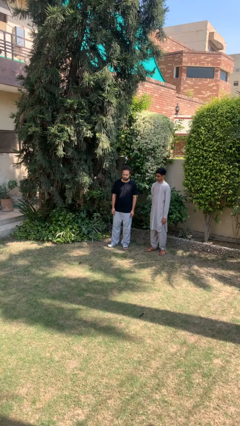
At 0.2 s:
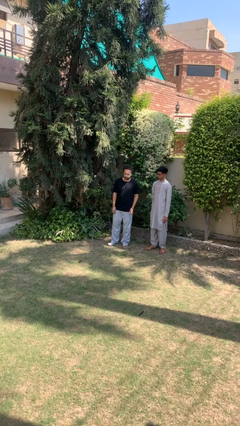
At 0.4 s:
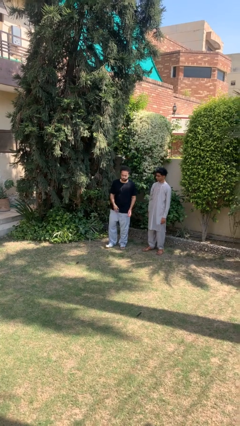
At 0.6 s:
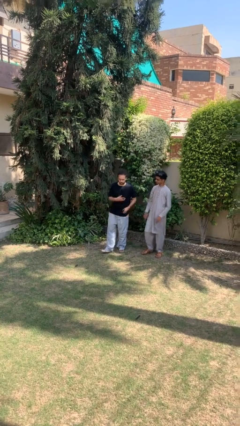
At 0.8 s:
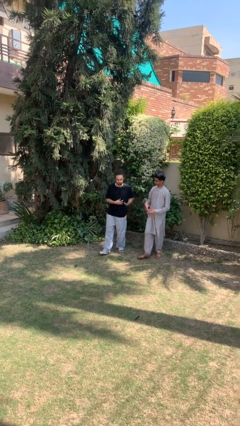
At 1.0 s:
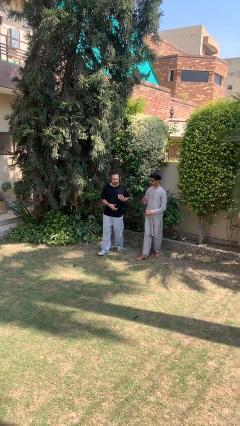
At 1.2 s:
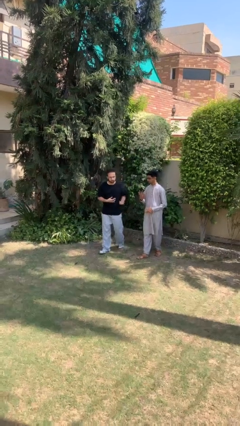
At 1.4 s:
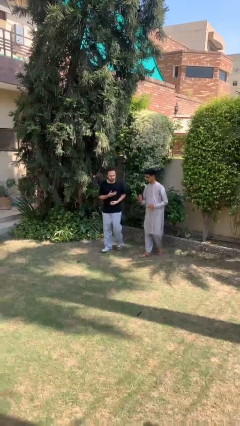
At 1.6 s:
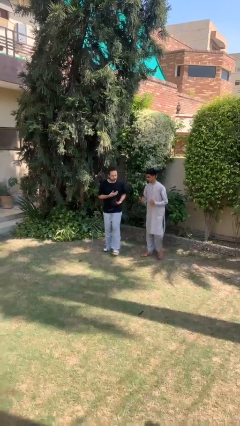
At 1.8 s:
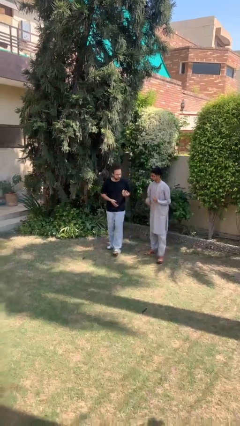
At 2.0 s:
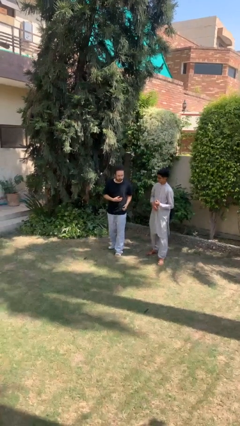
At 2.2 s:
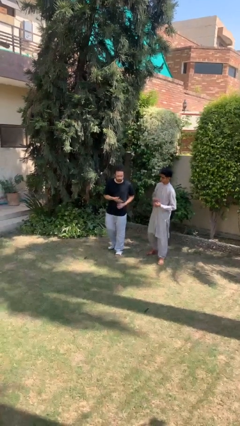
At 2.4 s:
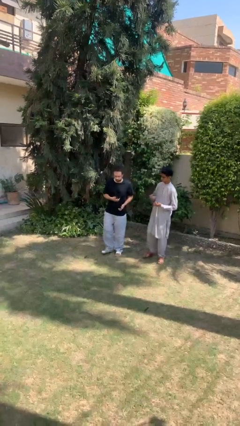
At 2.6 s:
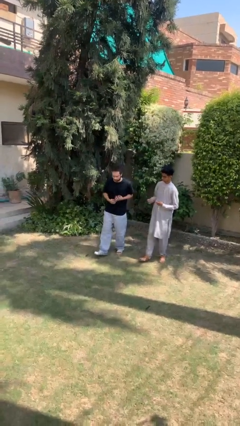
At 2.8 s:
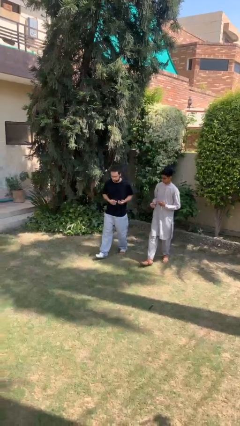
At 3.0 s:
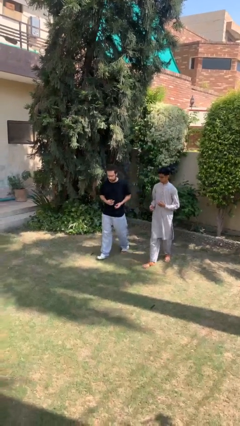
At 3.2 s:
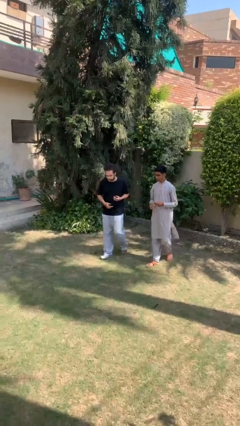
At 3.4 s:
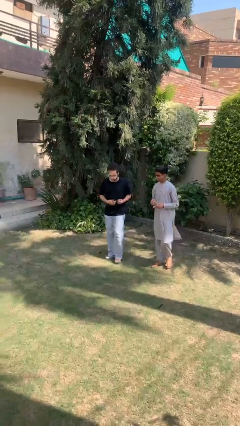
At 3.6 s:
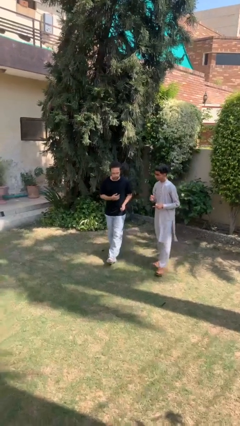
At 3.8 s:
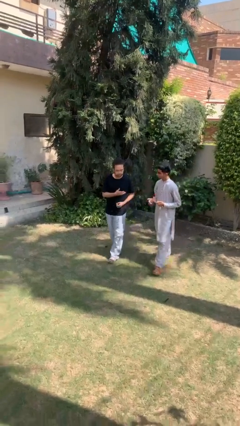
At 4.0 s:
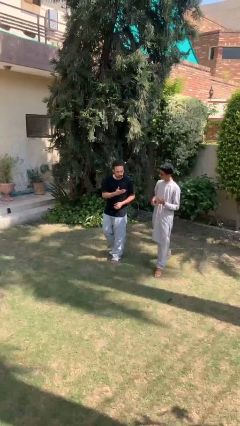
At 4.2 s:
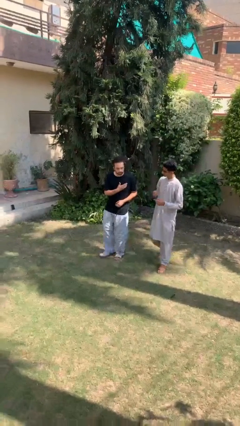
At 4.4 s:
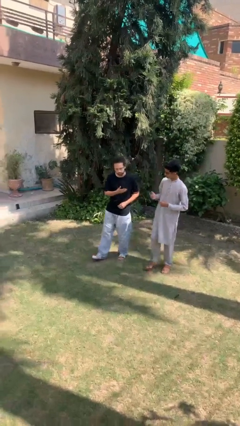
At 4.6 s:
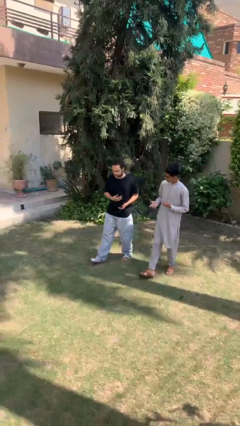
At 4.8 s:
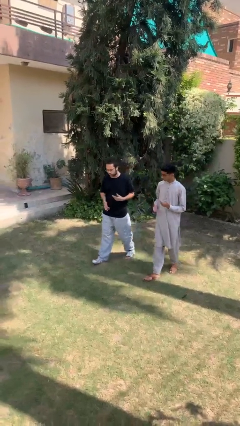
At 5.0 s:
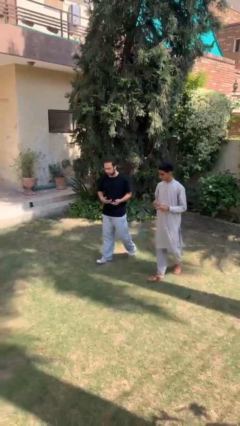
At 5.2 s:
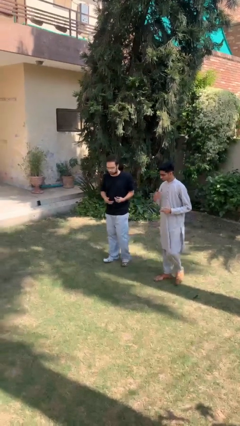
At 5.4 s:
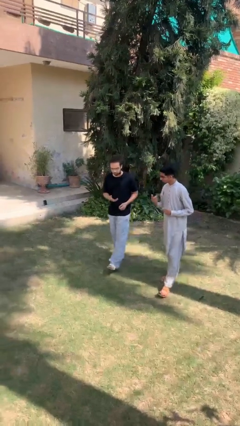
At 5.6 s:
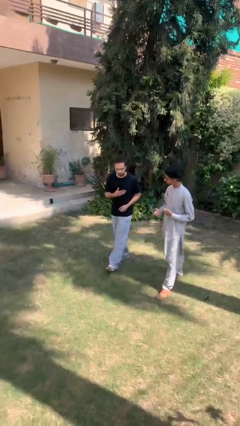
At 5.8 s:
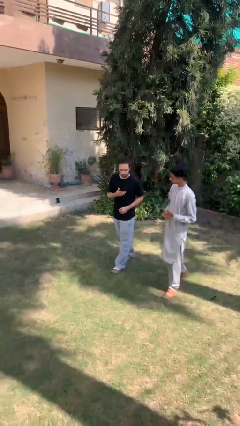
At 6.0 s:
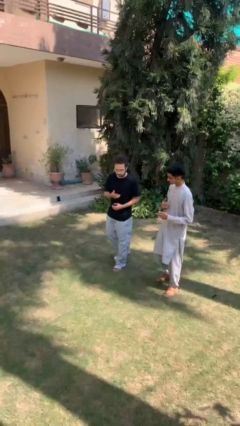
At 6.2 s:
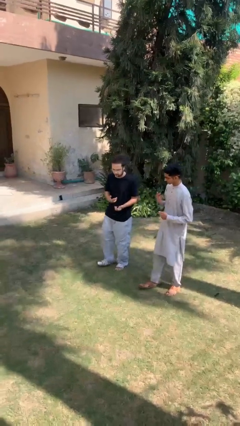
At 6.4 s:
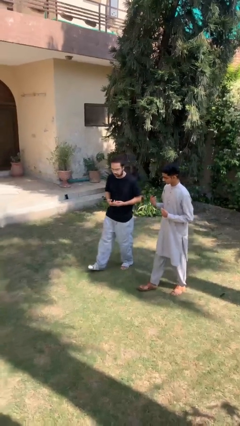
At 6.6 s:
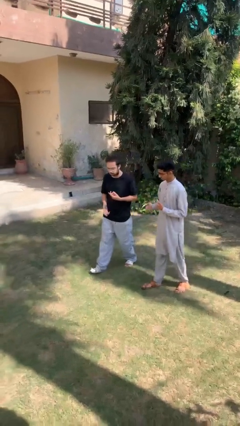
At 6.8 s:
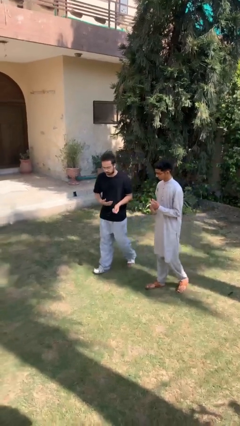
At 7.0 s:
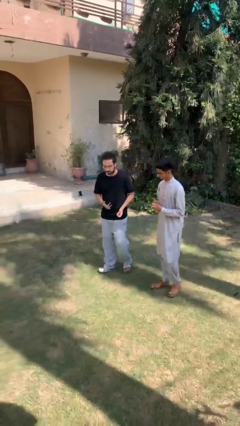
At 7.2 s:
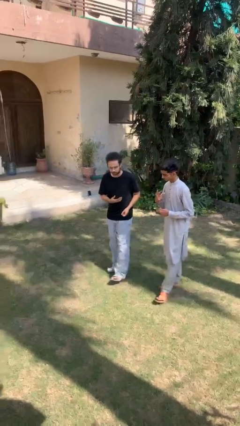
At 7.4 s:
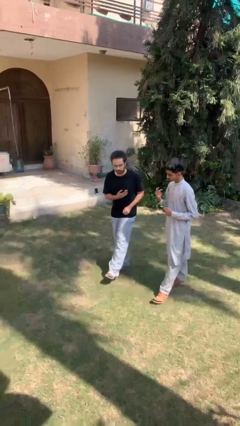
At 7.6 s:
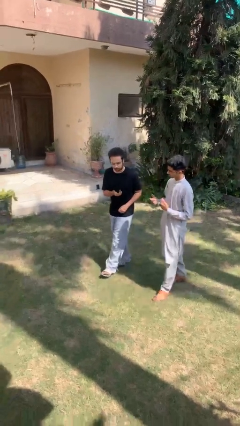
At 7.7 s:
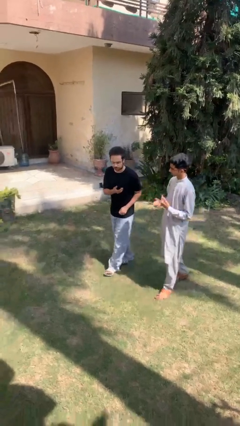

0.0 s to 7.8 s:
person talks to person

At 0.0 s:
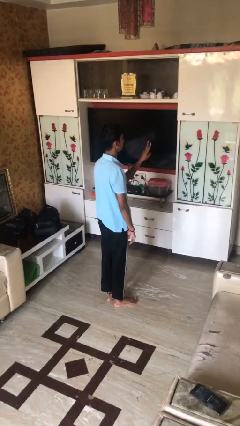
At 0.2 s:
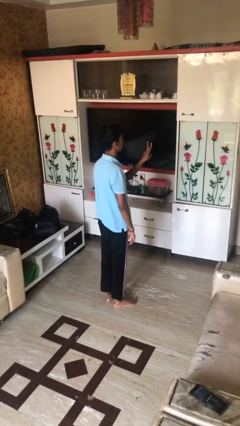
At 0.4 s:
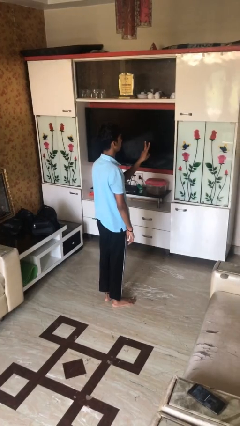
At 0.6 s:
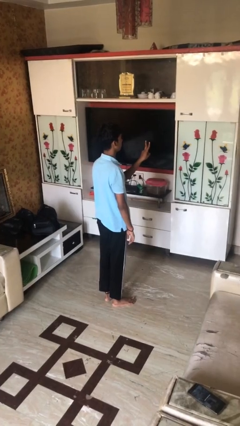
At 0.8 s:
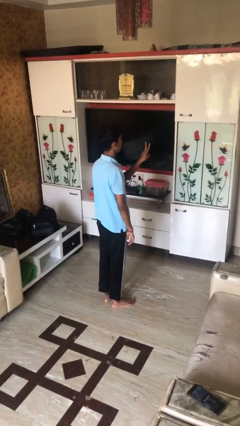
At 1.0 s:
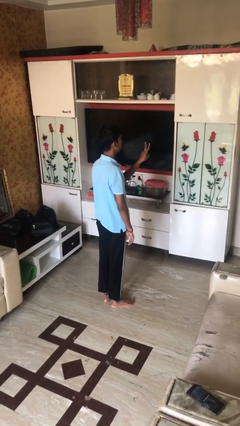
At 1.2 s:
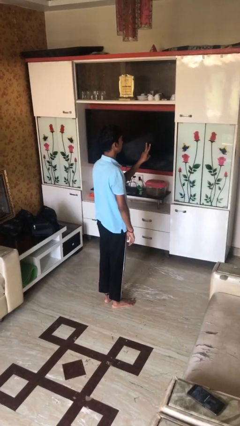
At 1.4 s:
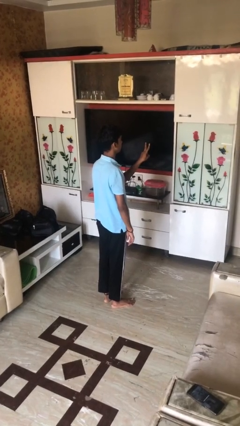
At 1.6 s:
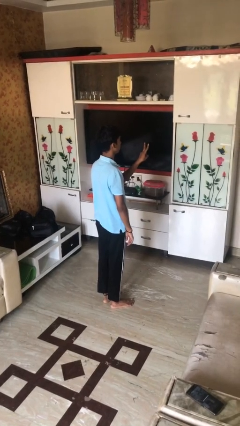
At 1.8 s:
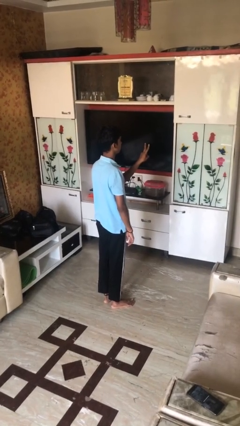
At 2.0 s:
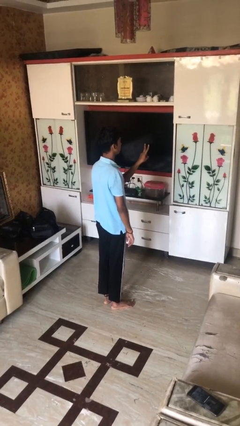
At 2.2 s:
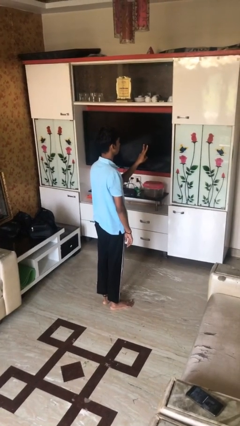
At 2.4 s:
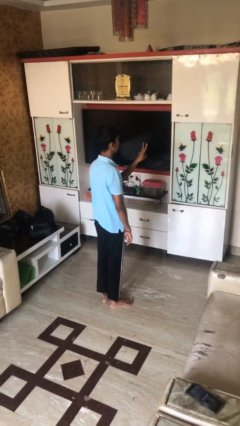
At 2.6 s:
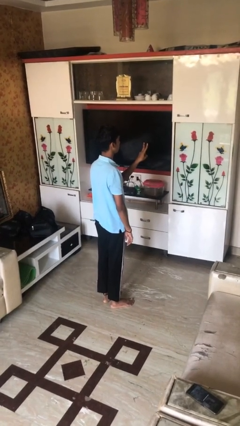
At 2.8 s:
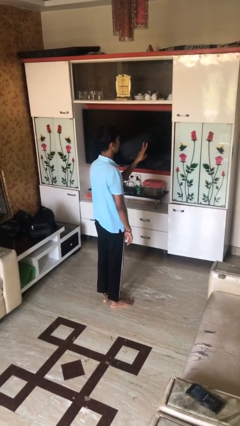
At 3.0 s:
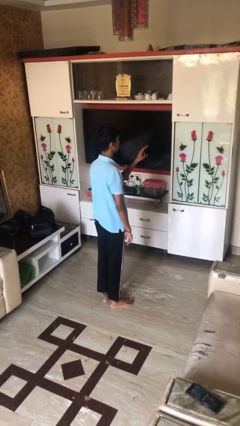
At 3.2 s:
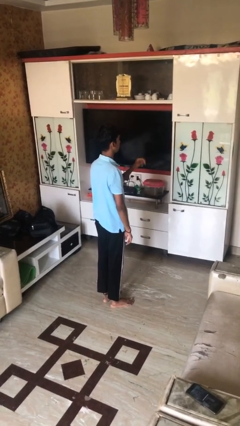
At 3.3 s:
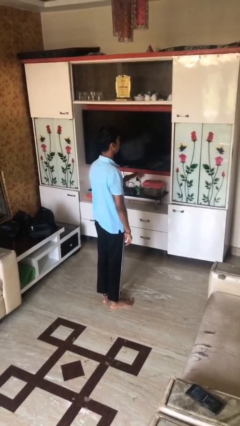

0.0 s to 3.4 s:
person gestures peace

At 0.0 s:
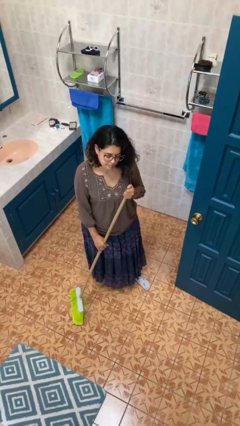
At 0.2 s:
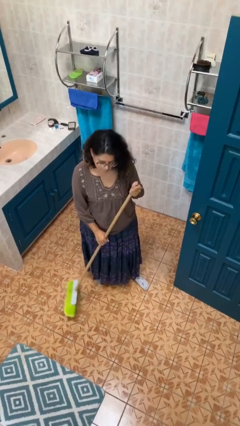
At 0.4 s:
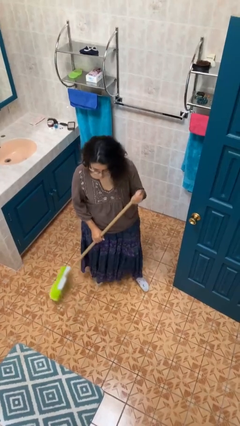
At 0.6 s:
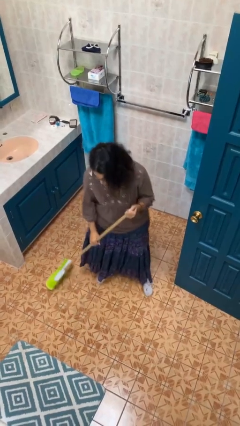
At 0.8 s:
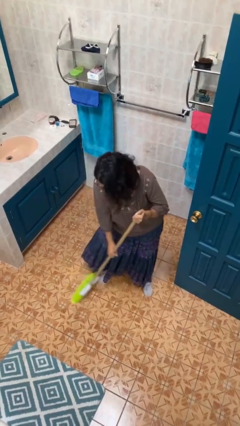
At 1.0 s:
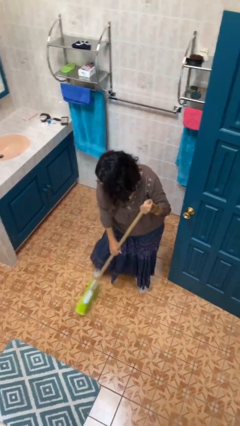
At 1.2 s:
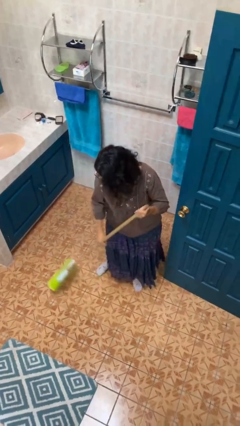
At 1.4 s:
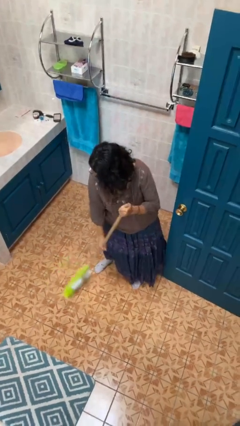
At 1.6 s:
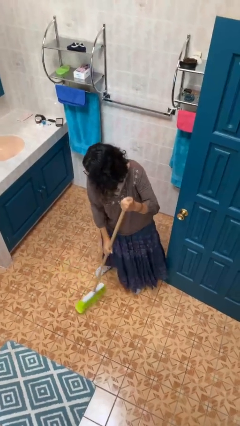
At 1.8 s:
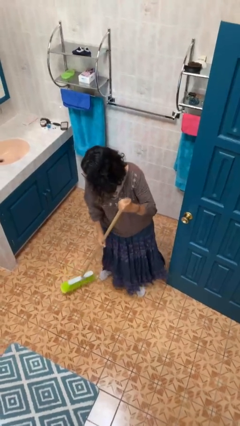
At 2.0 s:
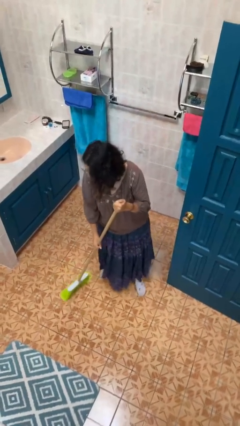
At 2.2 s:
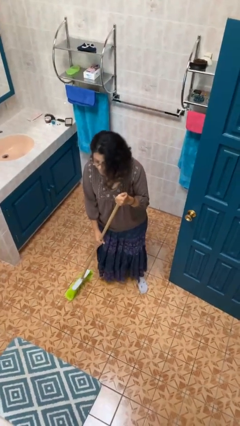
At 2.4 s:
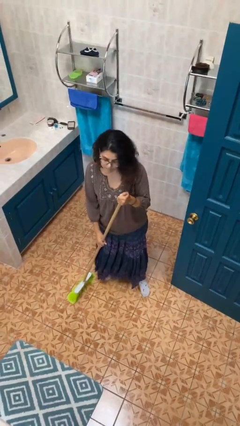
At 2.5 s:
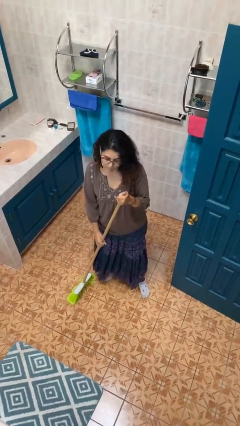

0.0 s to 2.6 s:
person sweeps floor

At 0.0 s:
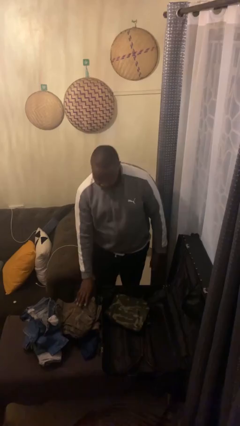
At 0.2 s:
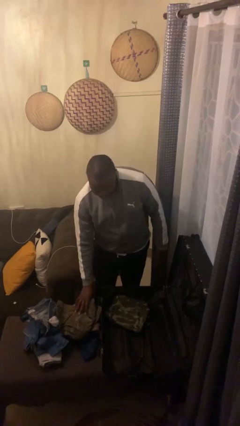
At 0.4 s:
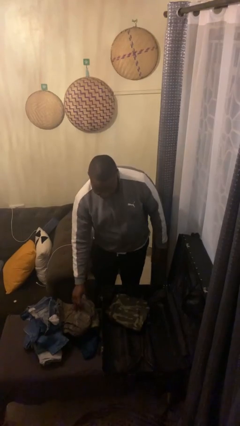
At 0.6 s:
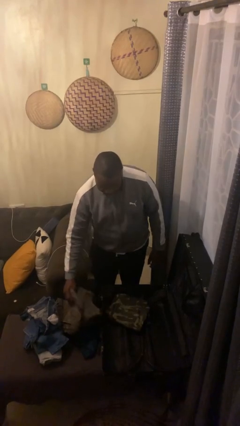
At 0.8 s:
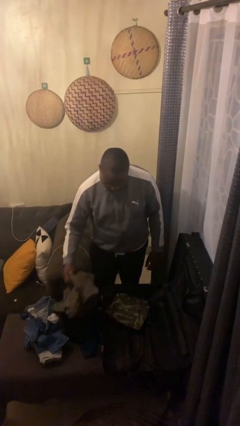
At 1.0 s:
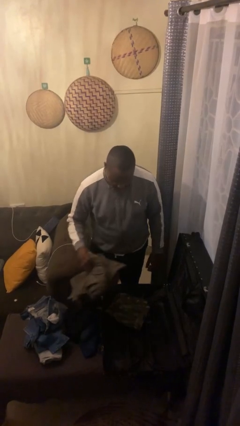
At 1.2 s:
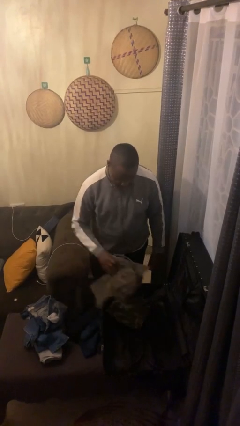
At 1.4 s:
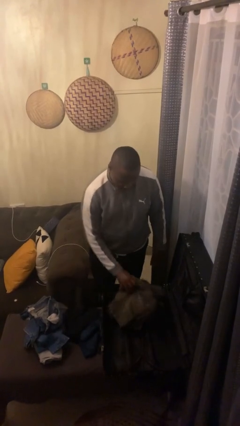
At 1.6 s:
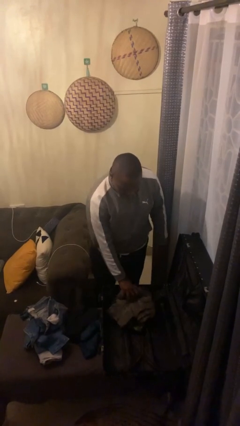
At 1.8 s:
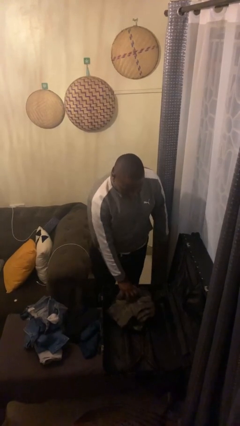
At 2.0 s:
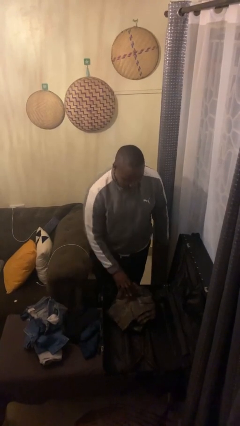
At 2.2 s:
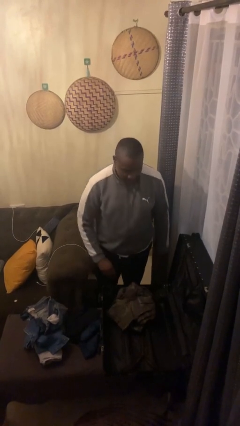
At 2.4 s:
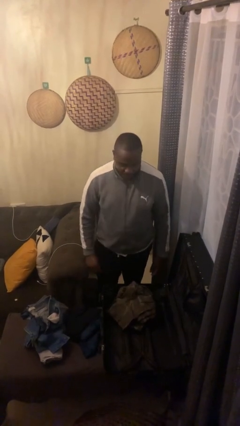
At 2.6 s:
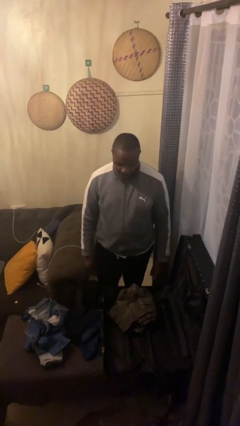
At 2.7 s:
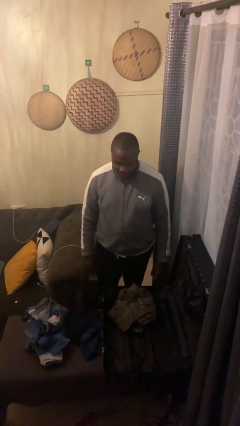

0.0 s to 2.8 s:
person loads clothes into suitcase

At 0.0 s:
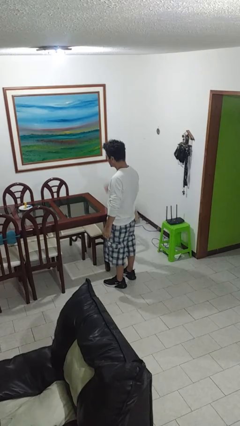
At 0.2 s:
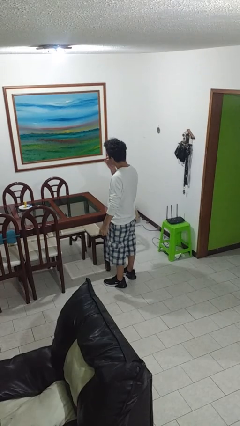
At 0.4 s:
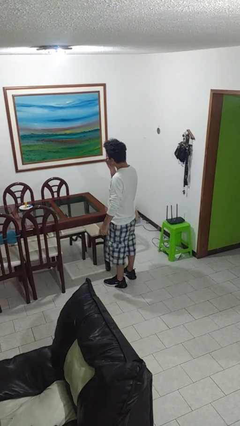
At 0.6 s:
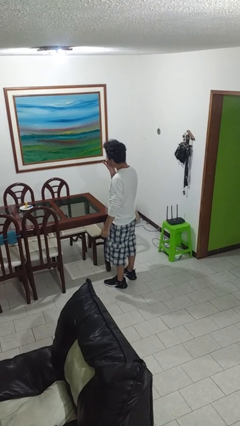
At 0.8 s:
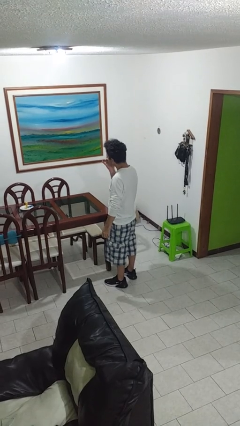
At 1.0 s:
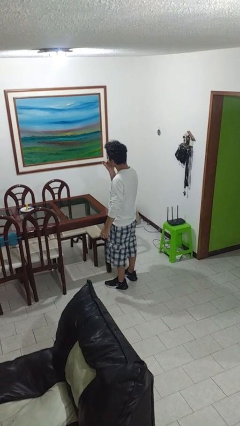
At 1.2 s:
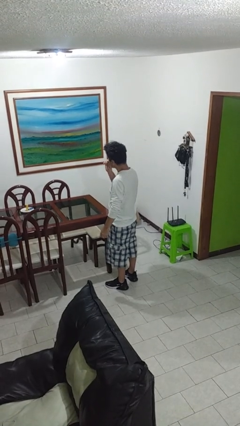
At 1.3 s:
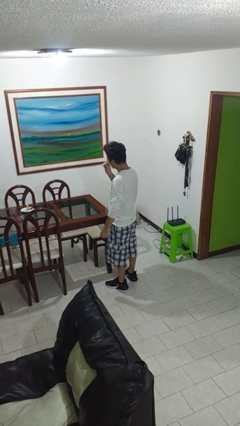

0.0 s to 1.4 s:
person licks fingers
